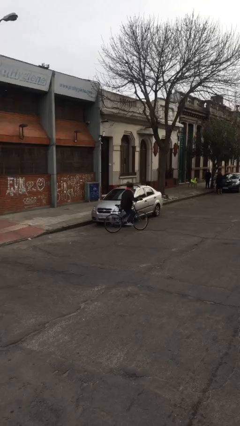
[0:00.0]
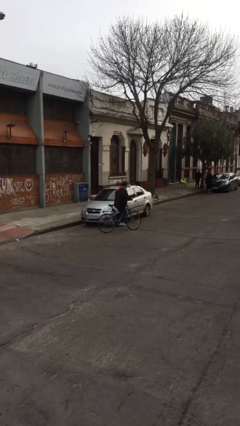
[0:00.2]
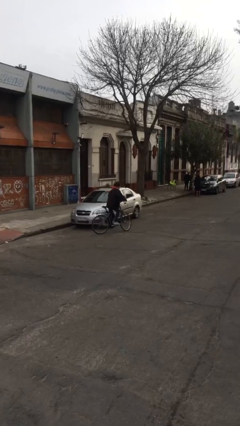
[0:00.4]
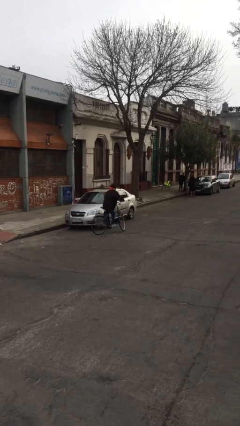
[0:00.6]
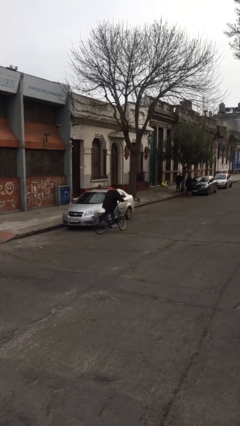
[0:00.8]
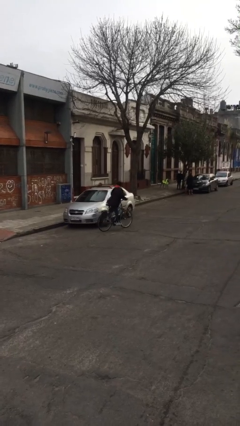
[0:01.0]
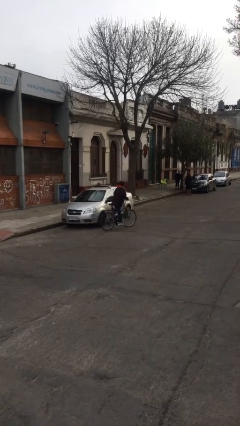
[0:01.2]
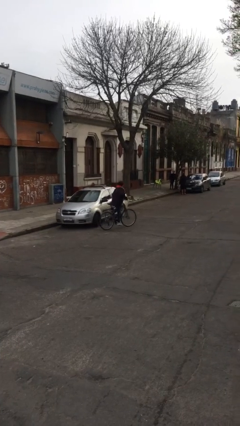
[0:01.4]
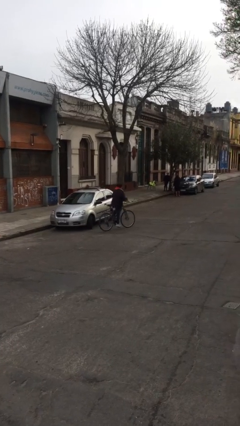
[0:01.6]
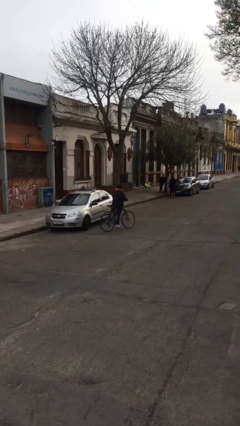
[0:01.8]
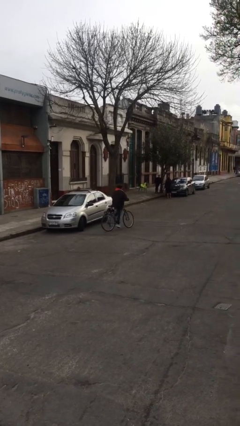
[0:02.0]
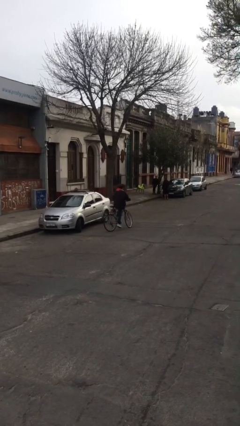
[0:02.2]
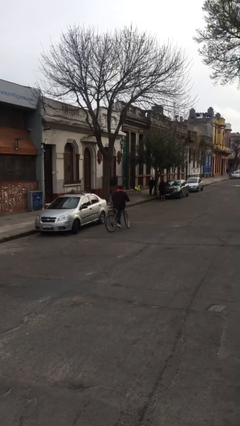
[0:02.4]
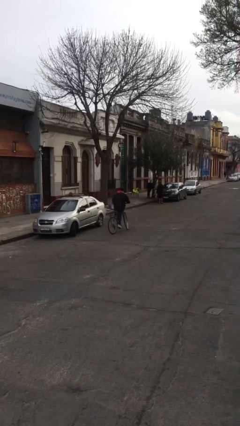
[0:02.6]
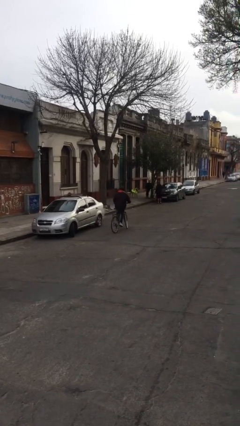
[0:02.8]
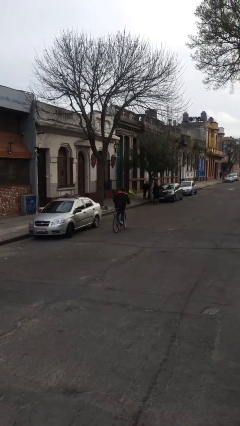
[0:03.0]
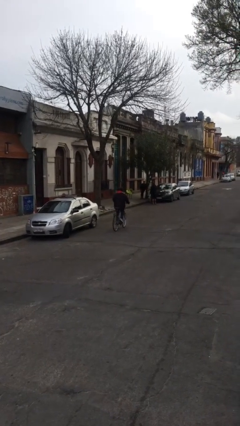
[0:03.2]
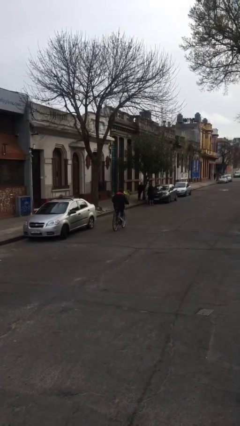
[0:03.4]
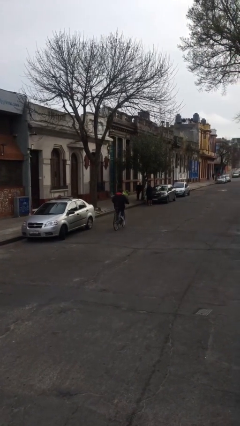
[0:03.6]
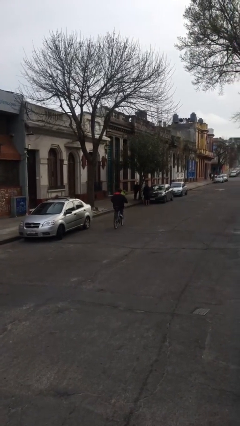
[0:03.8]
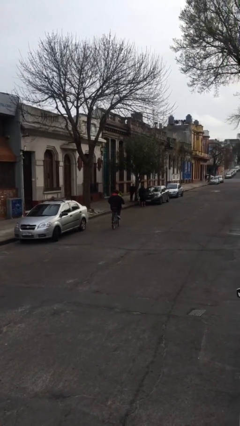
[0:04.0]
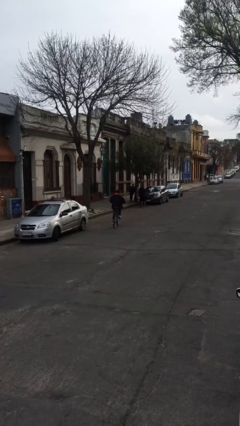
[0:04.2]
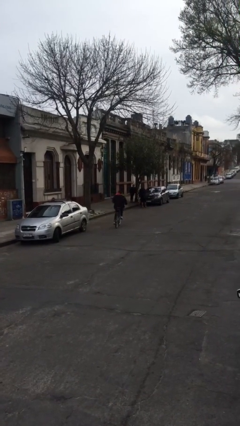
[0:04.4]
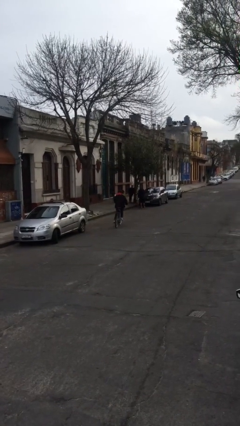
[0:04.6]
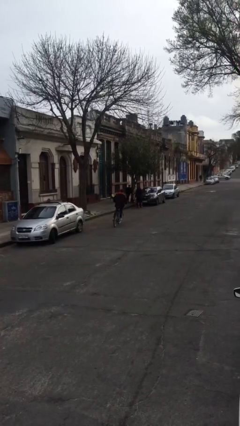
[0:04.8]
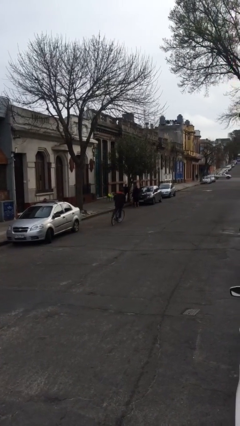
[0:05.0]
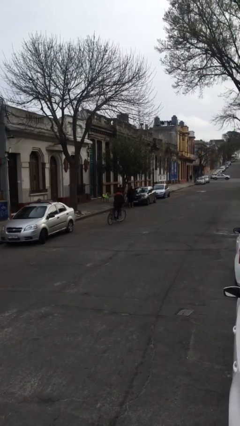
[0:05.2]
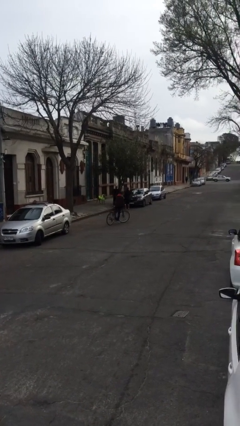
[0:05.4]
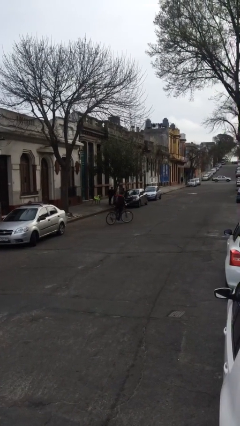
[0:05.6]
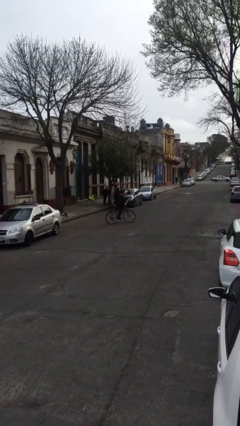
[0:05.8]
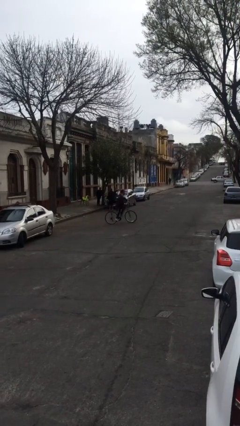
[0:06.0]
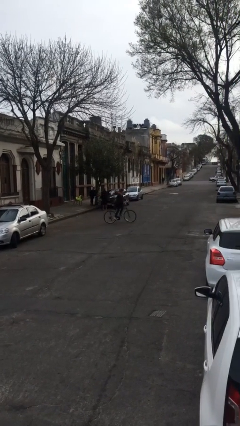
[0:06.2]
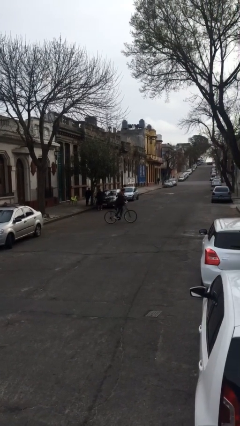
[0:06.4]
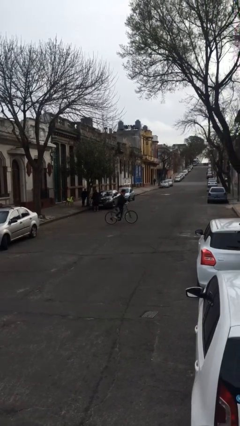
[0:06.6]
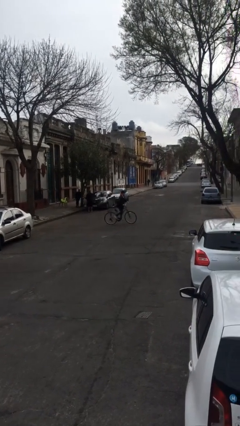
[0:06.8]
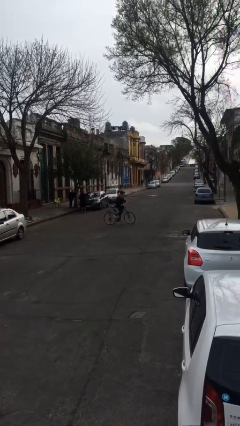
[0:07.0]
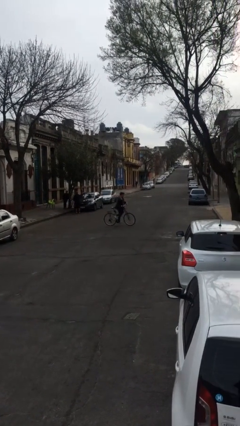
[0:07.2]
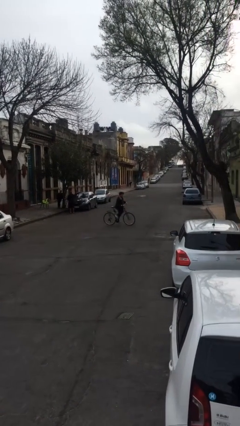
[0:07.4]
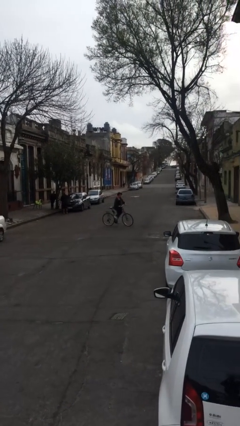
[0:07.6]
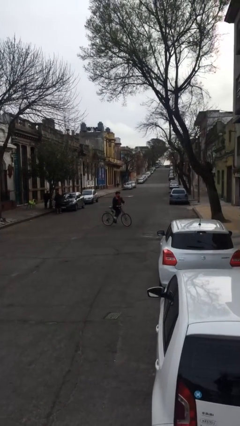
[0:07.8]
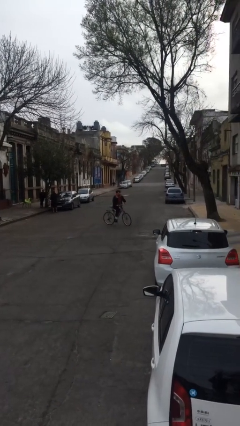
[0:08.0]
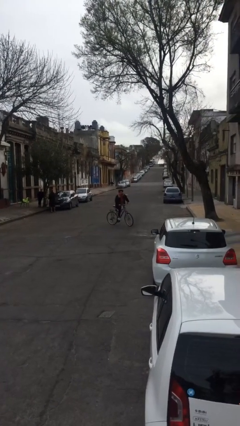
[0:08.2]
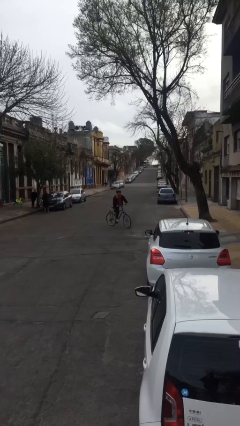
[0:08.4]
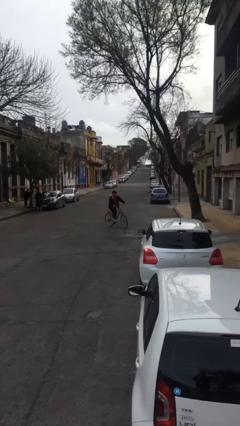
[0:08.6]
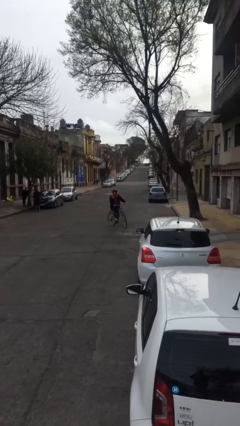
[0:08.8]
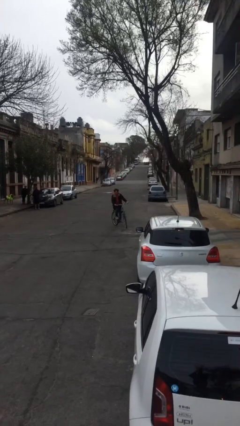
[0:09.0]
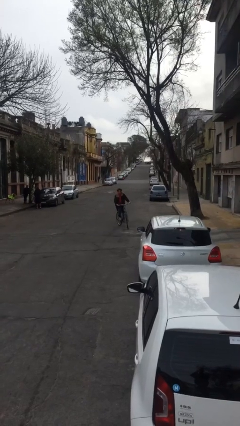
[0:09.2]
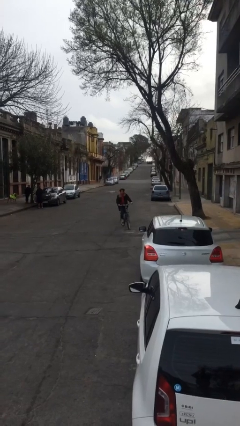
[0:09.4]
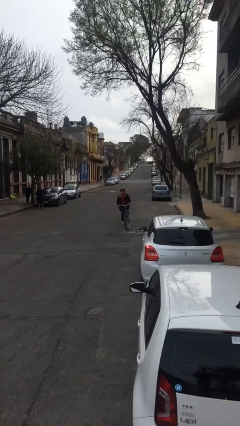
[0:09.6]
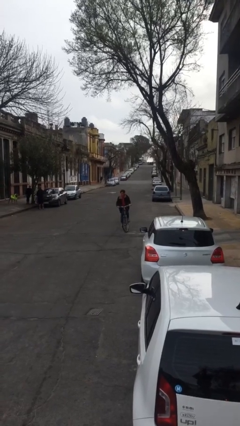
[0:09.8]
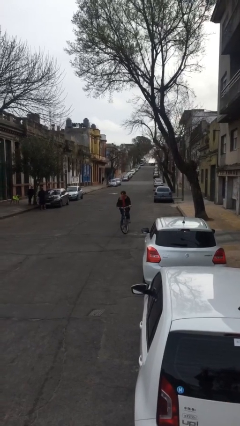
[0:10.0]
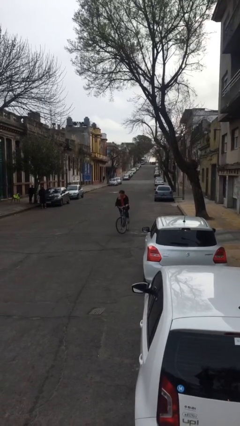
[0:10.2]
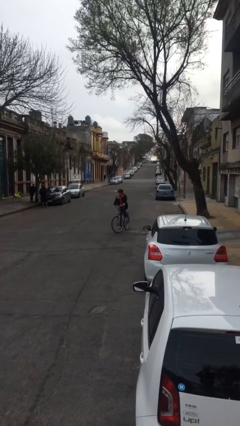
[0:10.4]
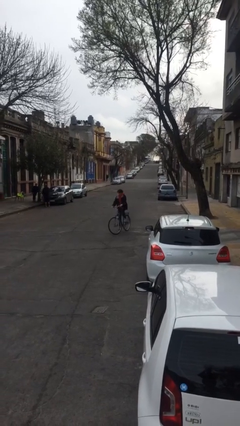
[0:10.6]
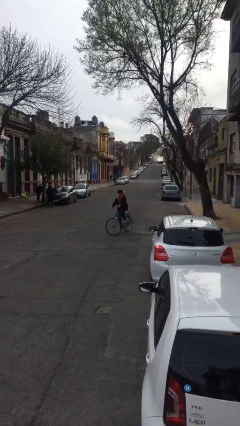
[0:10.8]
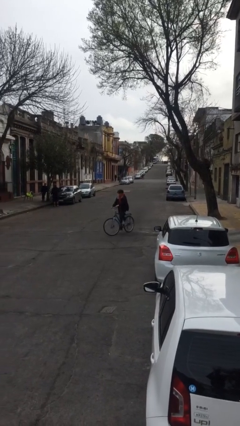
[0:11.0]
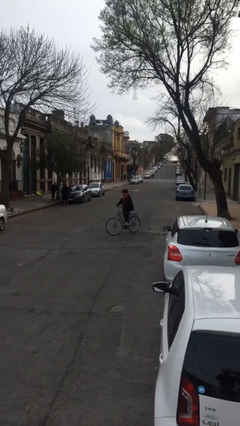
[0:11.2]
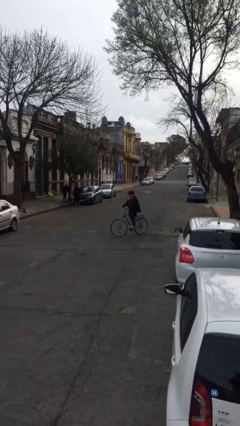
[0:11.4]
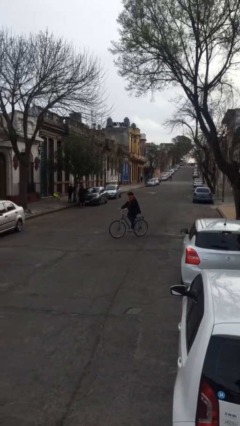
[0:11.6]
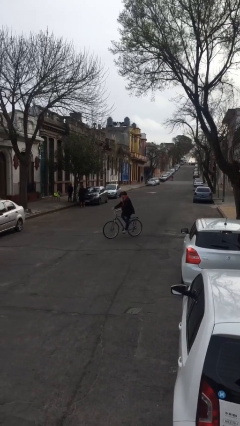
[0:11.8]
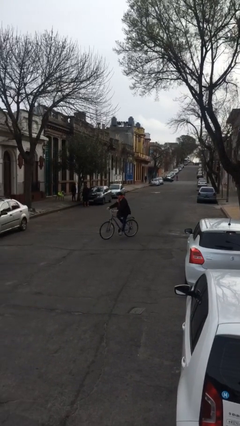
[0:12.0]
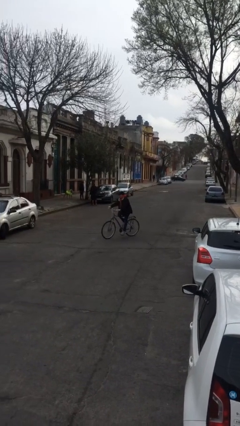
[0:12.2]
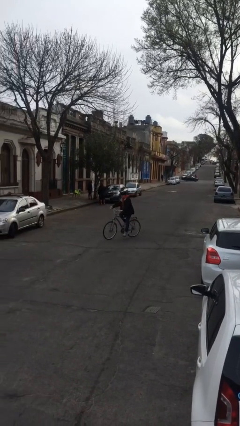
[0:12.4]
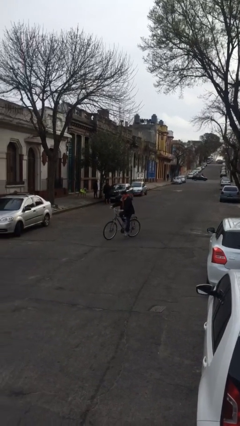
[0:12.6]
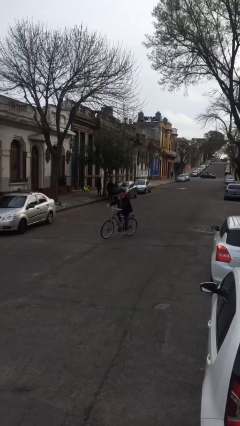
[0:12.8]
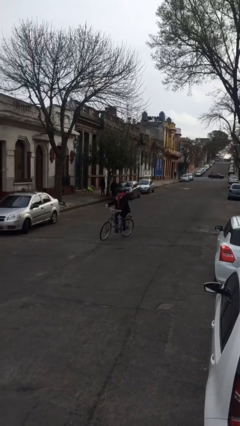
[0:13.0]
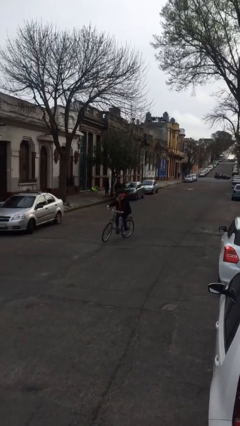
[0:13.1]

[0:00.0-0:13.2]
person rides bicycle

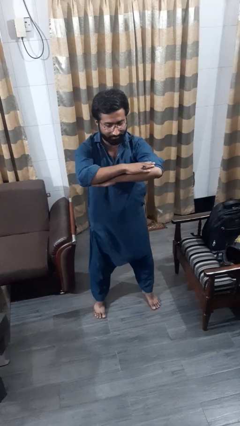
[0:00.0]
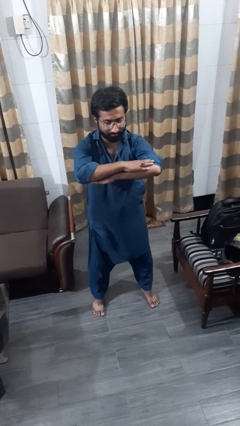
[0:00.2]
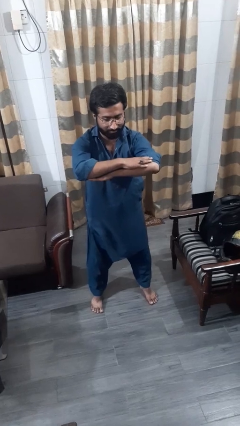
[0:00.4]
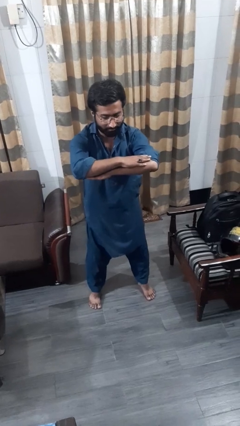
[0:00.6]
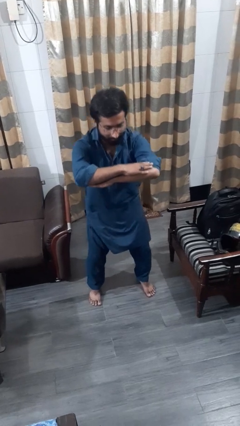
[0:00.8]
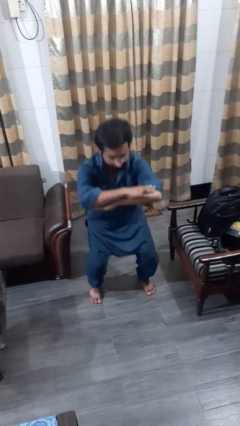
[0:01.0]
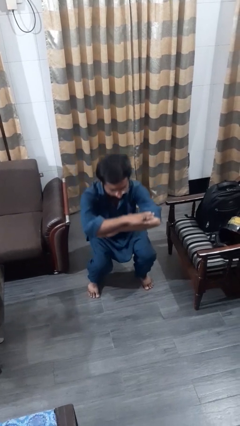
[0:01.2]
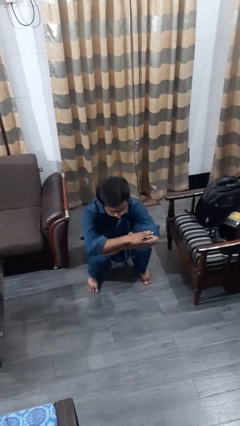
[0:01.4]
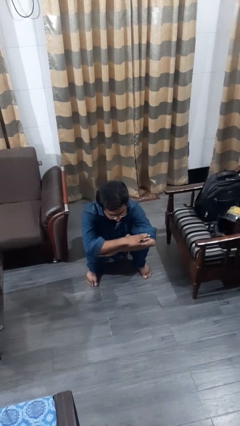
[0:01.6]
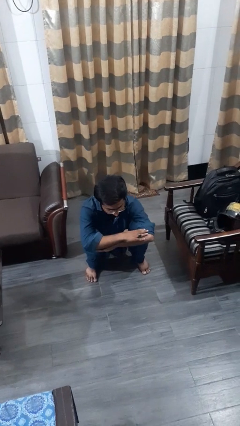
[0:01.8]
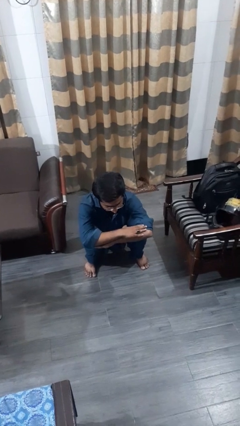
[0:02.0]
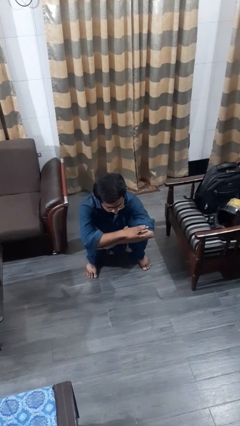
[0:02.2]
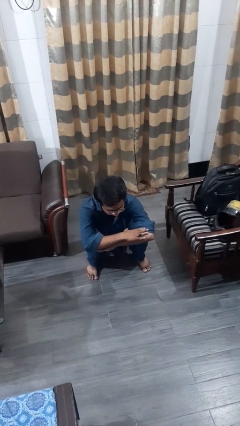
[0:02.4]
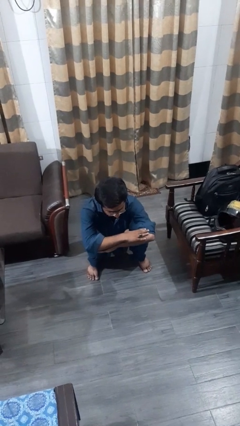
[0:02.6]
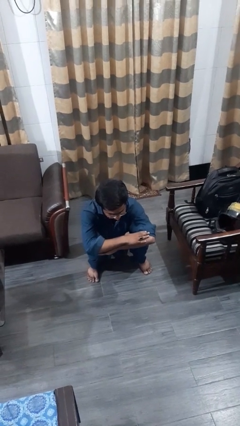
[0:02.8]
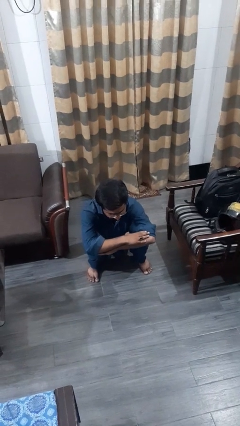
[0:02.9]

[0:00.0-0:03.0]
person squats

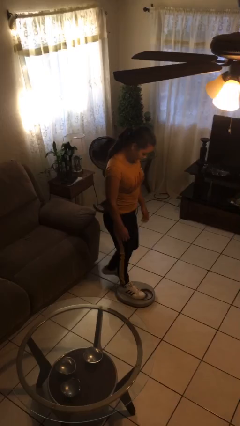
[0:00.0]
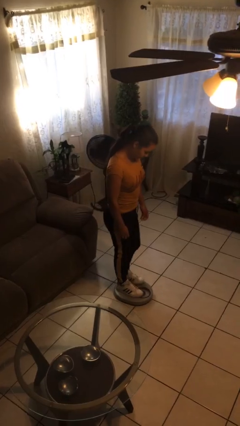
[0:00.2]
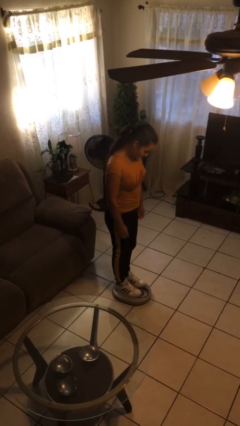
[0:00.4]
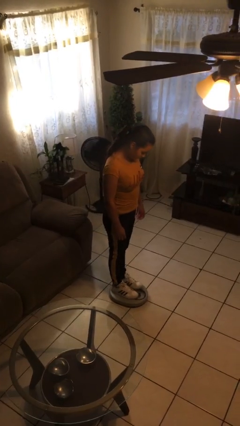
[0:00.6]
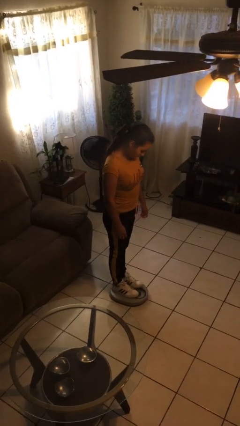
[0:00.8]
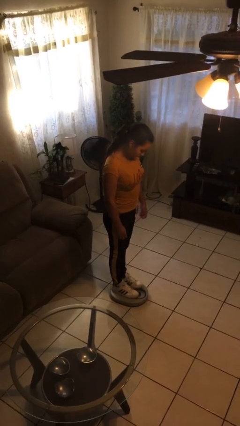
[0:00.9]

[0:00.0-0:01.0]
person uses bodyweight scale

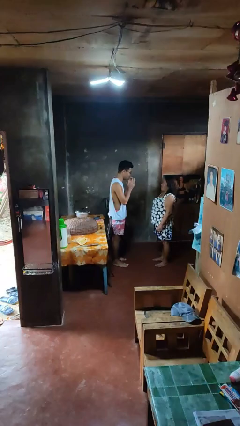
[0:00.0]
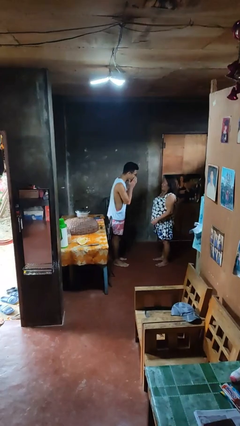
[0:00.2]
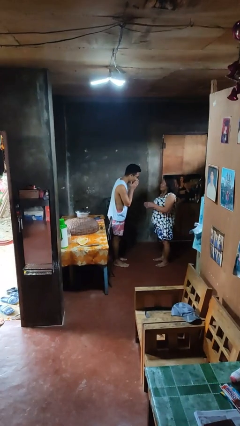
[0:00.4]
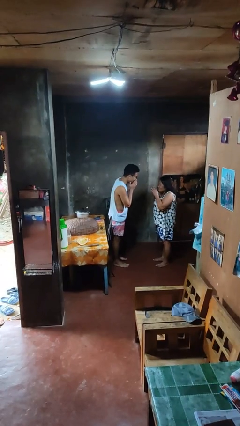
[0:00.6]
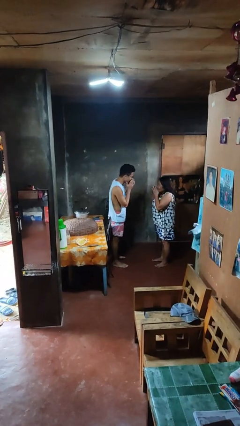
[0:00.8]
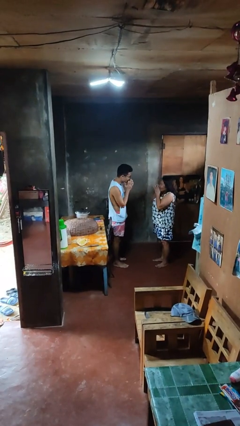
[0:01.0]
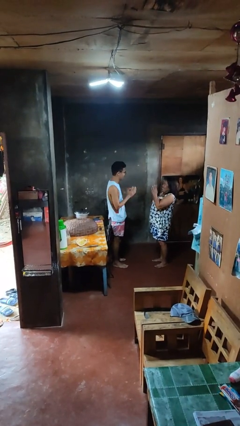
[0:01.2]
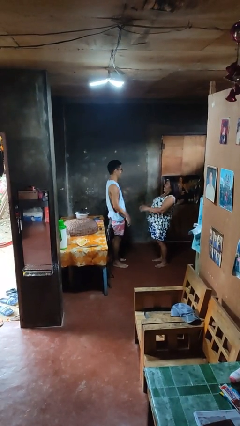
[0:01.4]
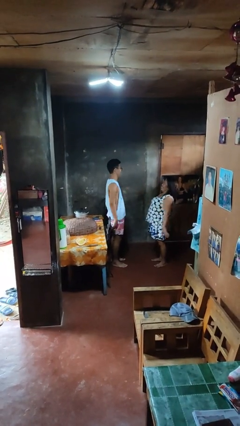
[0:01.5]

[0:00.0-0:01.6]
person laughs with person
